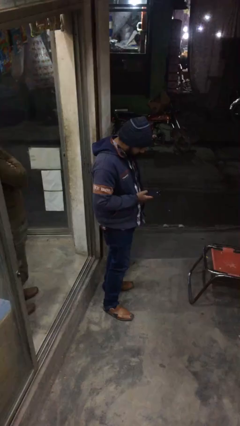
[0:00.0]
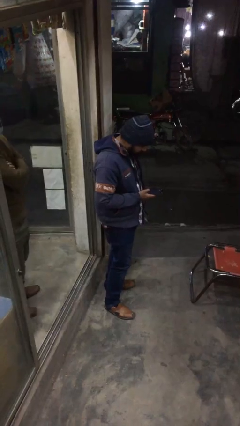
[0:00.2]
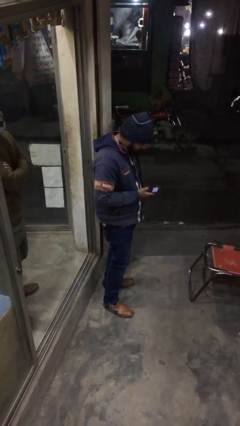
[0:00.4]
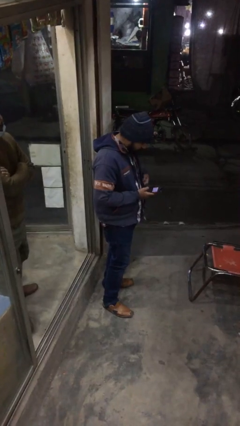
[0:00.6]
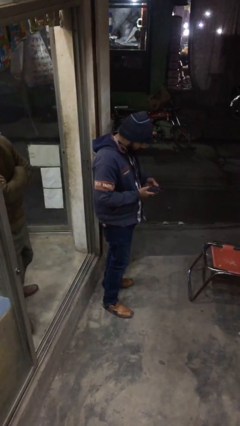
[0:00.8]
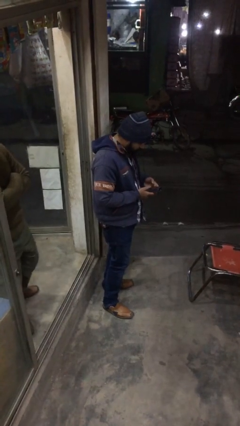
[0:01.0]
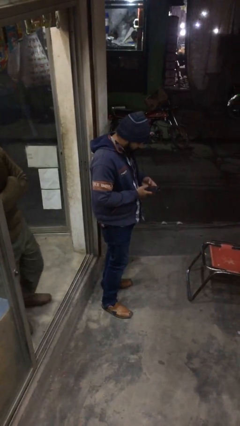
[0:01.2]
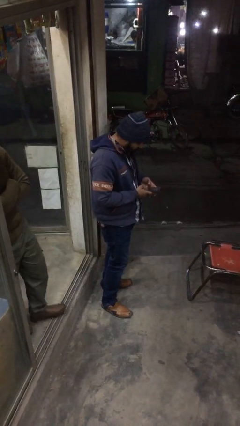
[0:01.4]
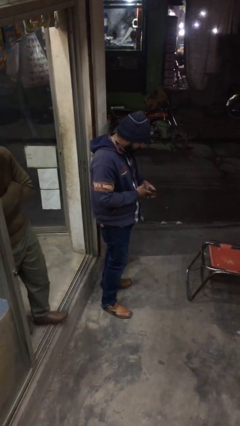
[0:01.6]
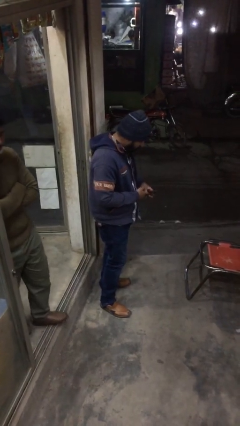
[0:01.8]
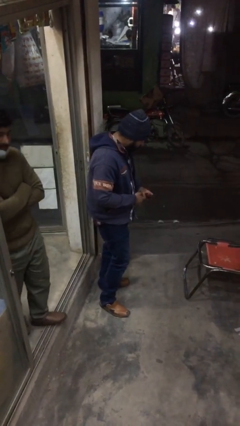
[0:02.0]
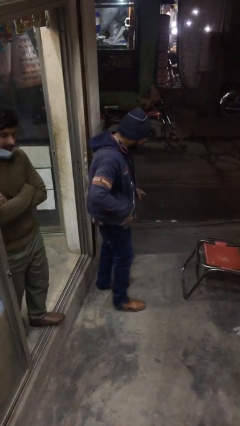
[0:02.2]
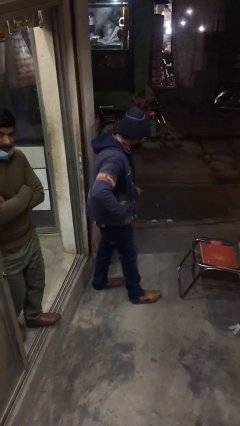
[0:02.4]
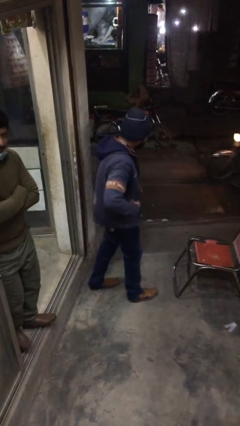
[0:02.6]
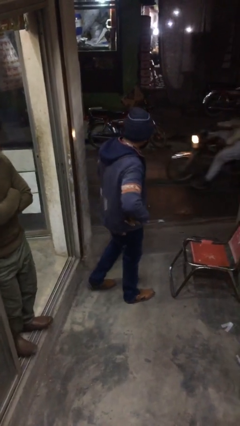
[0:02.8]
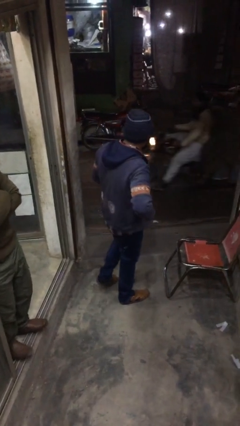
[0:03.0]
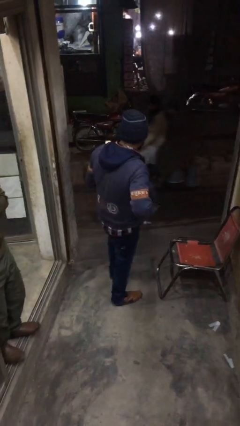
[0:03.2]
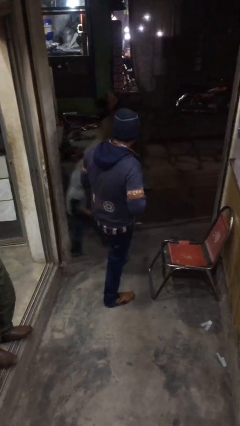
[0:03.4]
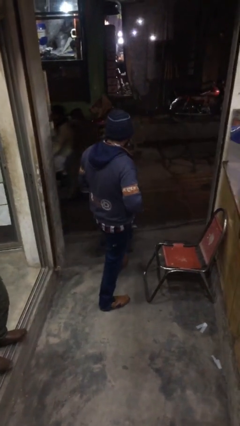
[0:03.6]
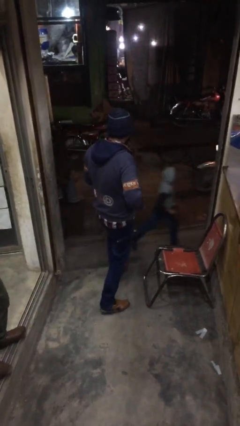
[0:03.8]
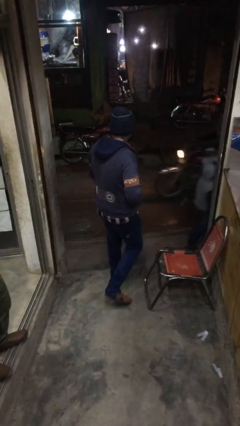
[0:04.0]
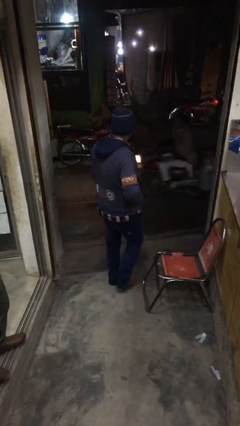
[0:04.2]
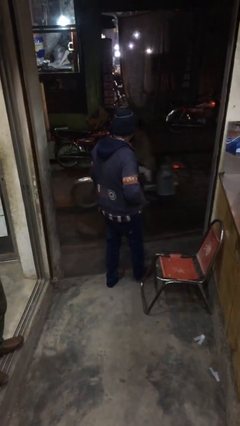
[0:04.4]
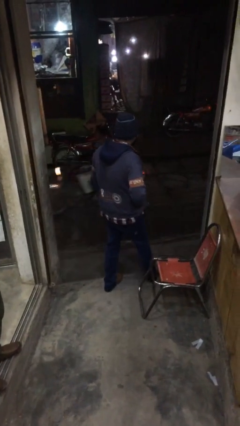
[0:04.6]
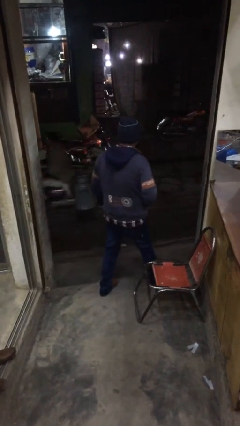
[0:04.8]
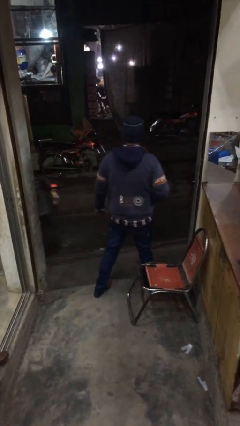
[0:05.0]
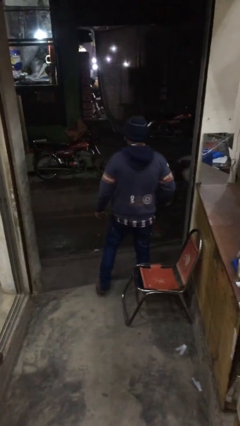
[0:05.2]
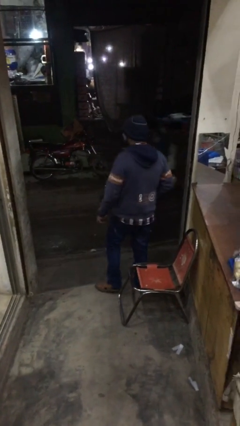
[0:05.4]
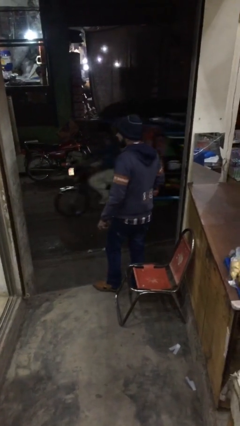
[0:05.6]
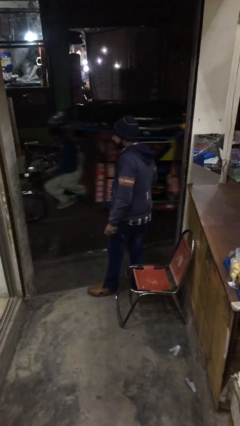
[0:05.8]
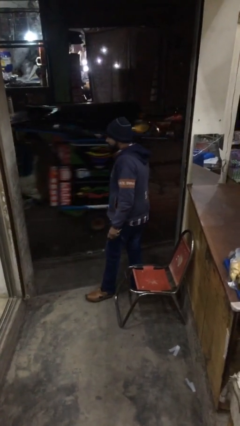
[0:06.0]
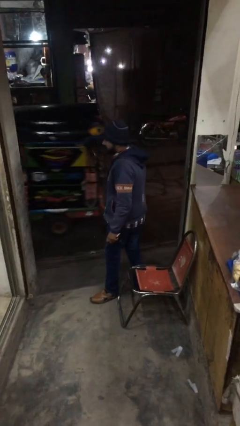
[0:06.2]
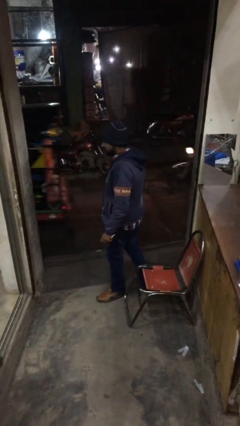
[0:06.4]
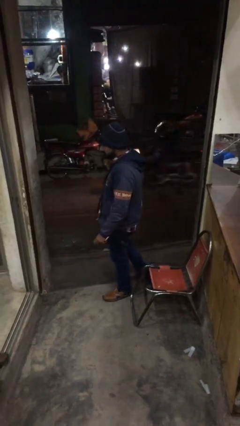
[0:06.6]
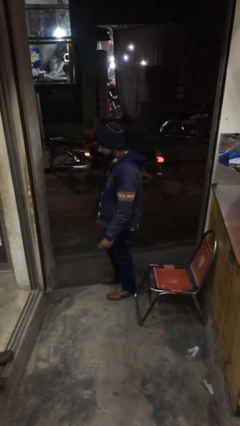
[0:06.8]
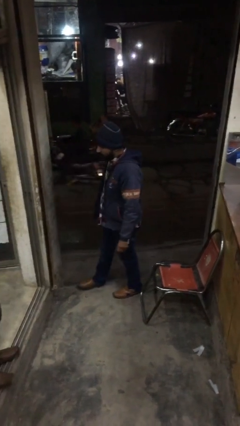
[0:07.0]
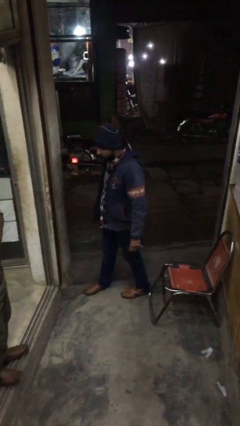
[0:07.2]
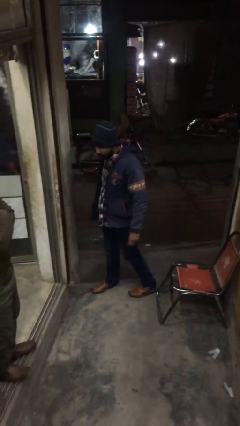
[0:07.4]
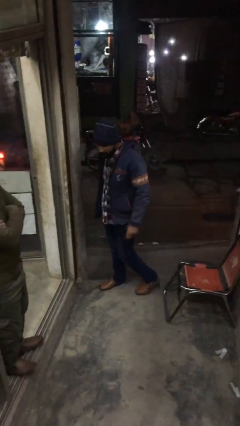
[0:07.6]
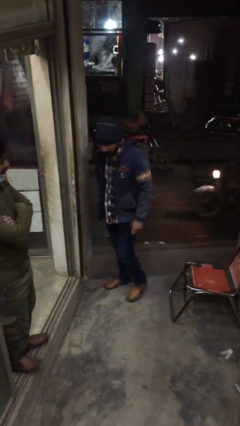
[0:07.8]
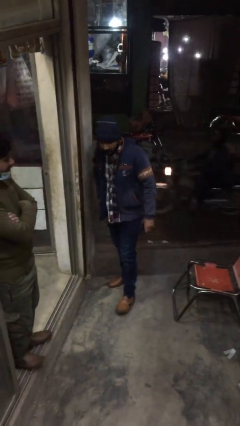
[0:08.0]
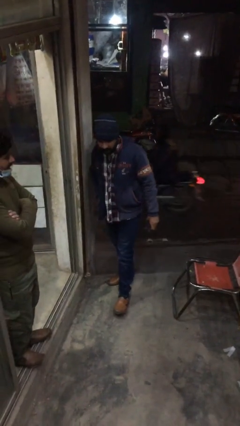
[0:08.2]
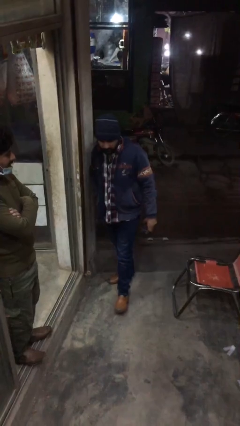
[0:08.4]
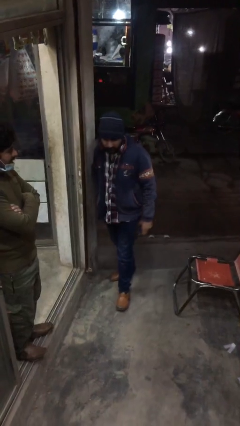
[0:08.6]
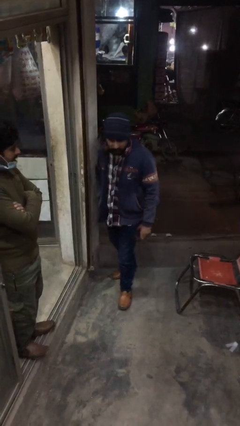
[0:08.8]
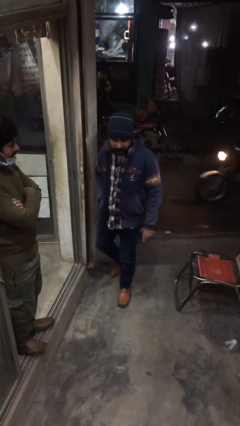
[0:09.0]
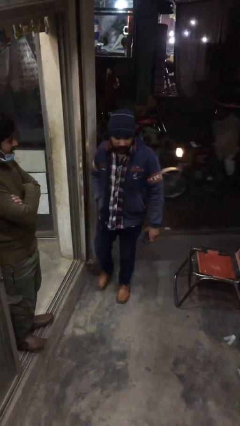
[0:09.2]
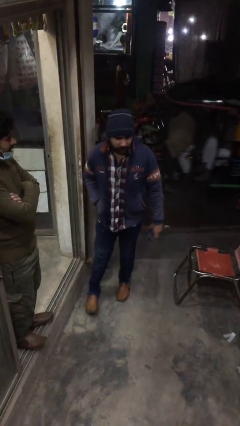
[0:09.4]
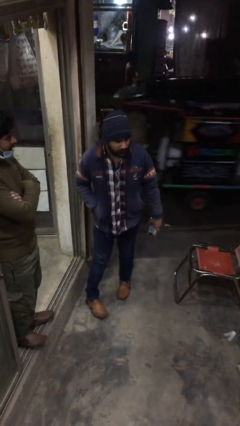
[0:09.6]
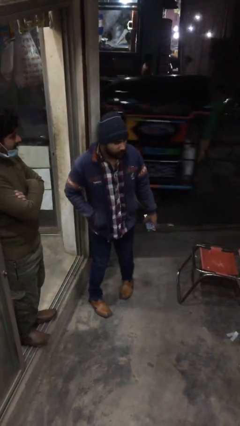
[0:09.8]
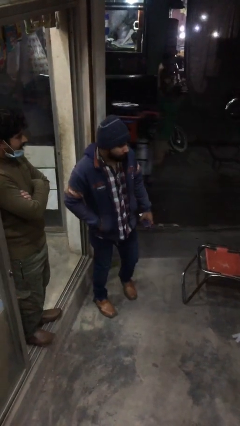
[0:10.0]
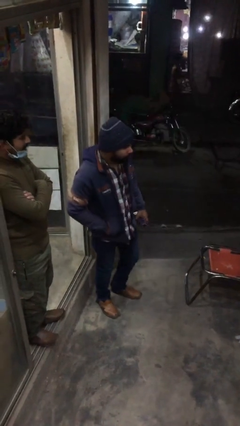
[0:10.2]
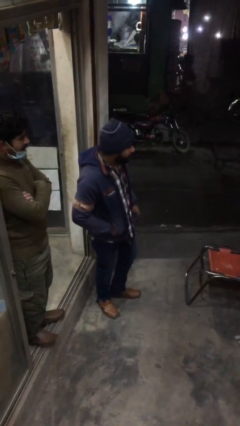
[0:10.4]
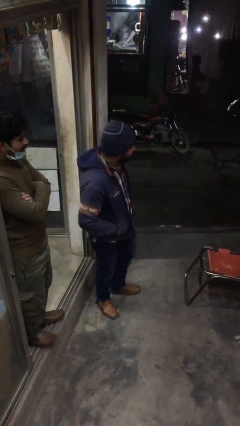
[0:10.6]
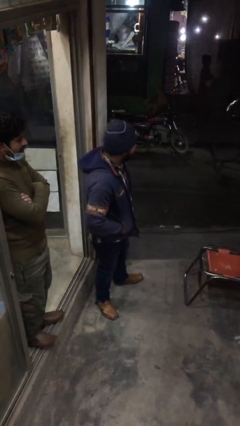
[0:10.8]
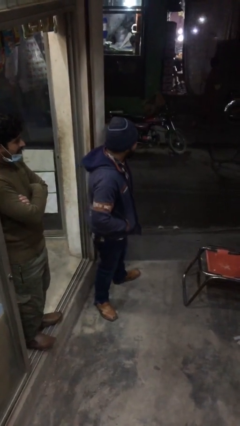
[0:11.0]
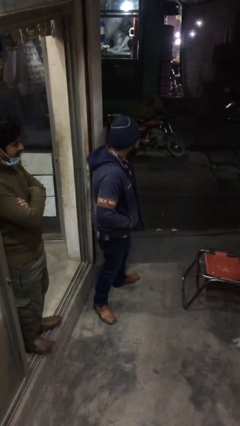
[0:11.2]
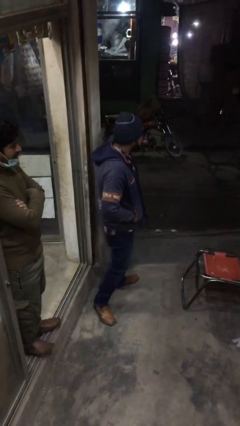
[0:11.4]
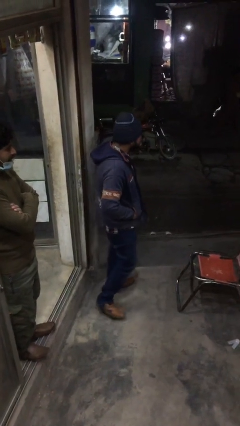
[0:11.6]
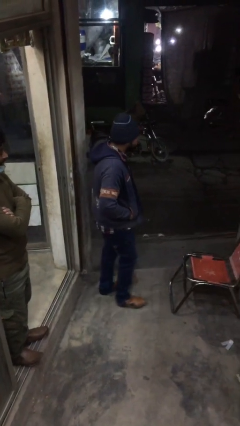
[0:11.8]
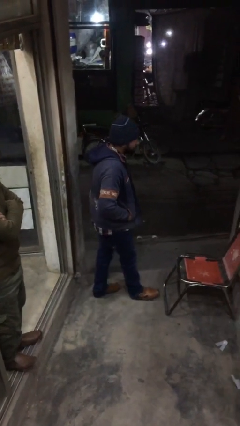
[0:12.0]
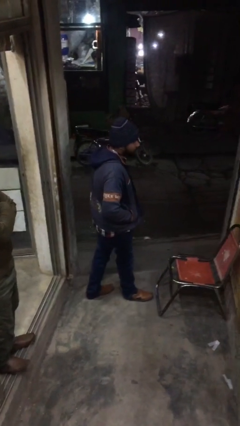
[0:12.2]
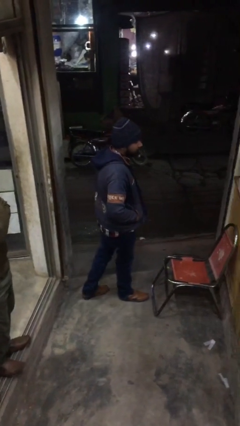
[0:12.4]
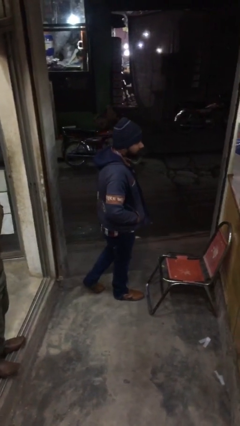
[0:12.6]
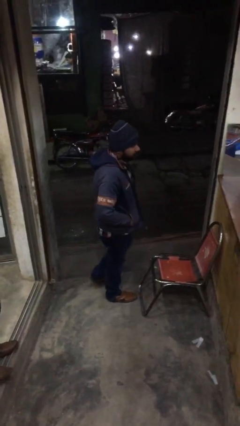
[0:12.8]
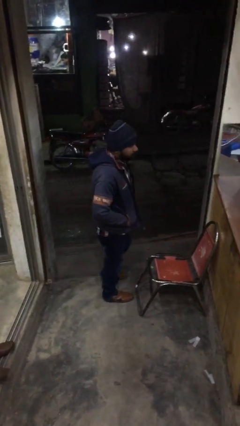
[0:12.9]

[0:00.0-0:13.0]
person walks

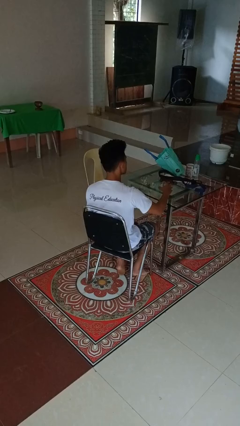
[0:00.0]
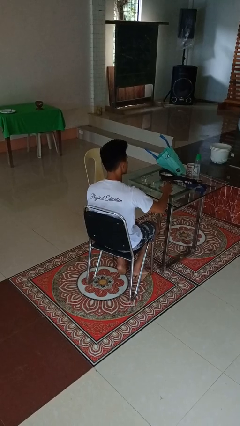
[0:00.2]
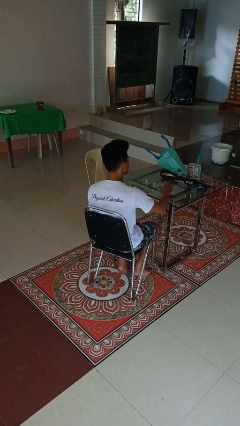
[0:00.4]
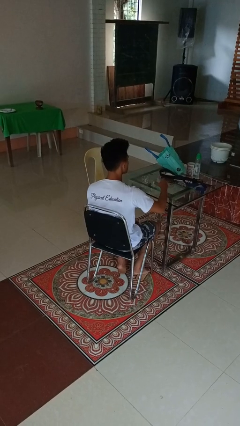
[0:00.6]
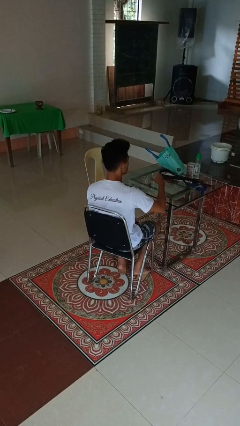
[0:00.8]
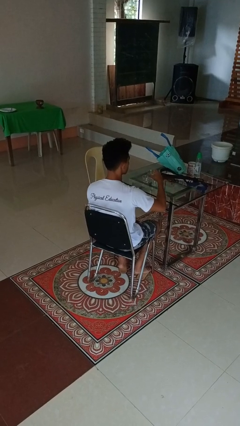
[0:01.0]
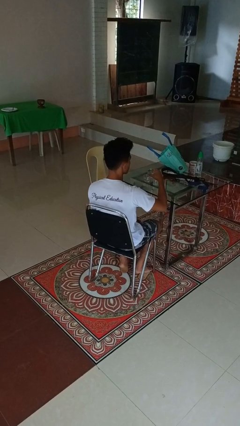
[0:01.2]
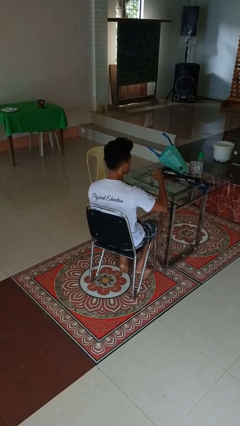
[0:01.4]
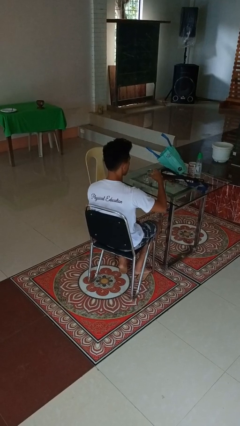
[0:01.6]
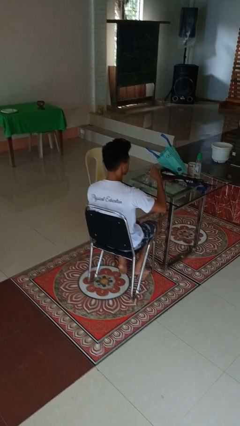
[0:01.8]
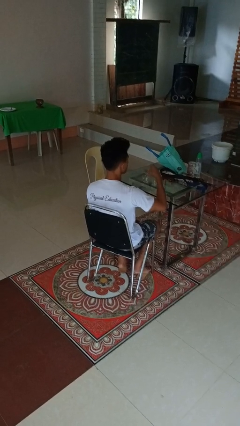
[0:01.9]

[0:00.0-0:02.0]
person picks up object from table

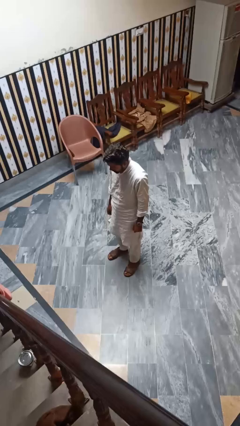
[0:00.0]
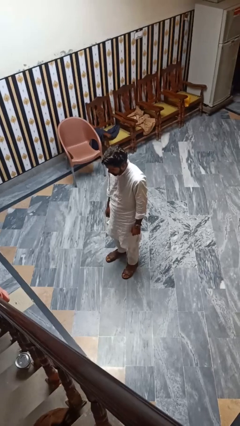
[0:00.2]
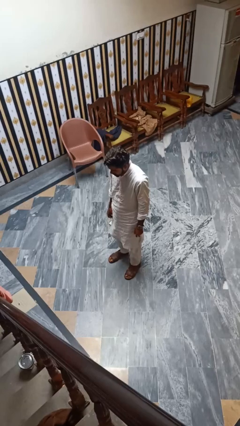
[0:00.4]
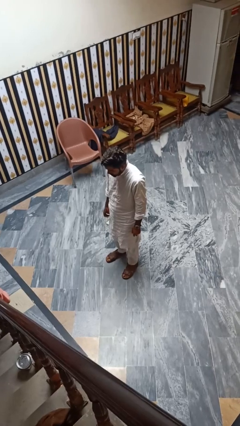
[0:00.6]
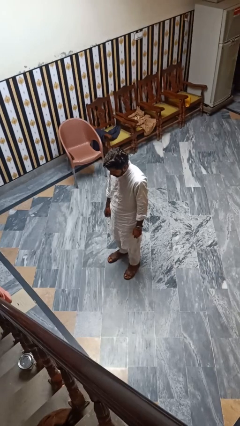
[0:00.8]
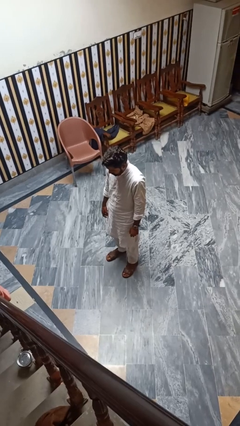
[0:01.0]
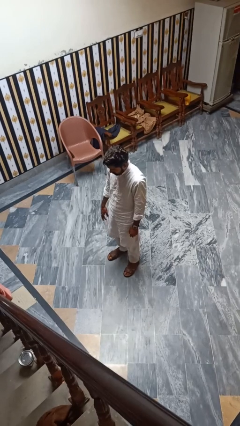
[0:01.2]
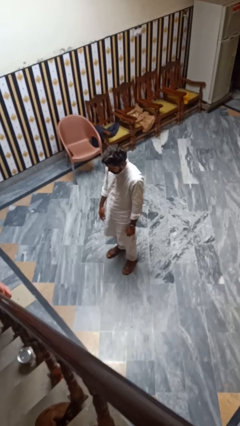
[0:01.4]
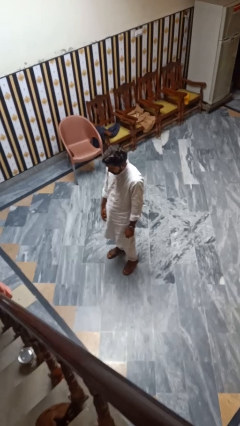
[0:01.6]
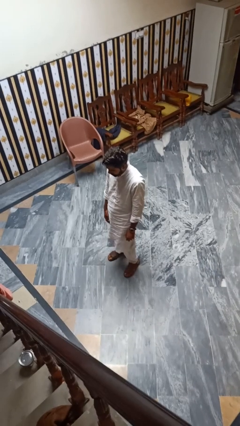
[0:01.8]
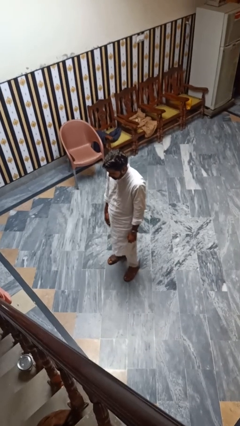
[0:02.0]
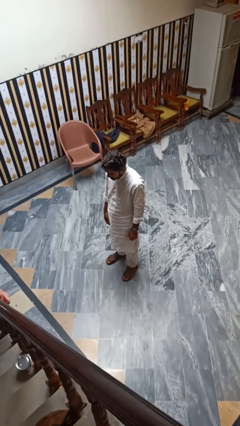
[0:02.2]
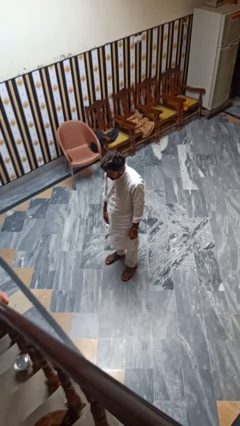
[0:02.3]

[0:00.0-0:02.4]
person falls while standing

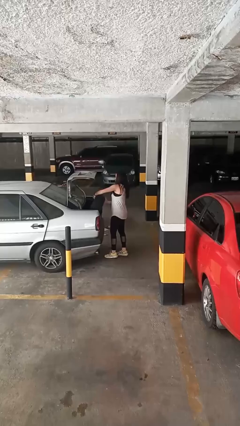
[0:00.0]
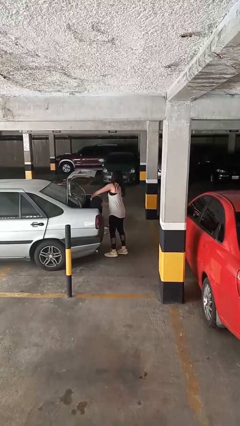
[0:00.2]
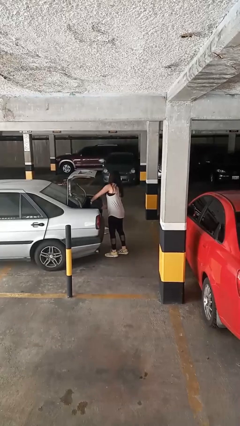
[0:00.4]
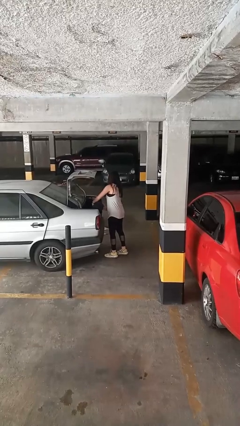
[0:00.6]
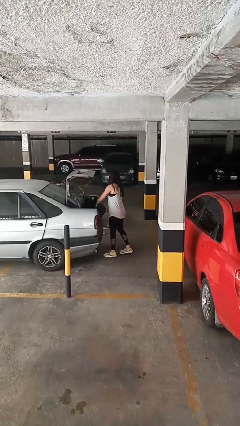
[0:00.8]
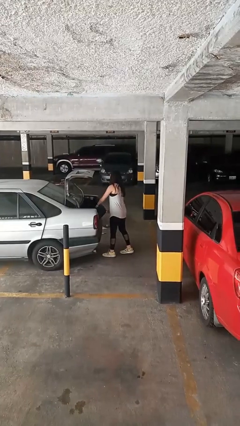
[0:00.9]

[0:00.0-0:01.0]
person loads car
